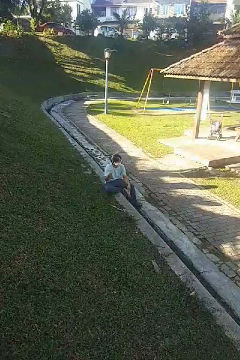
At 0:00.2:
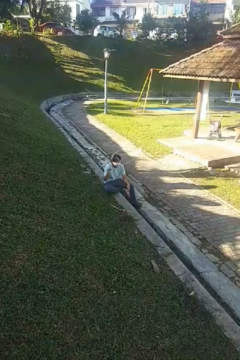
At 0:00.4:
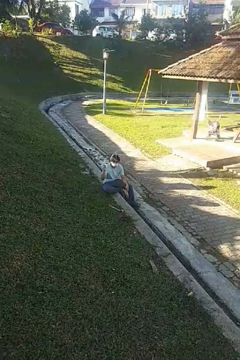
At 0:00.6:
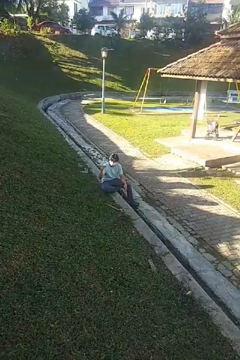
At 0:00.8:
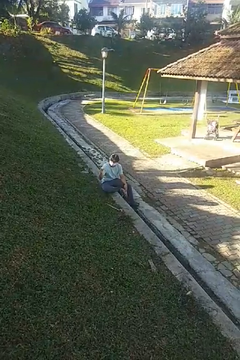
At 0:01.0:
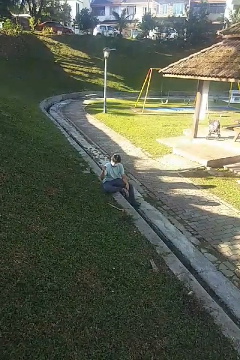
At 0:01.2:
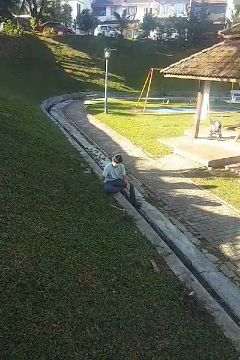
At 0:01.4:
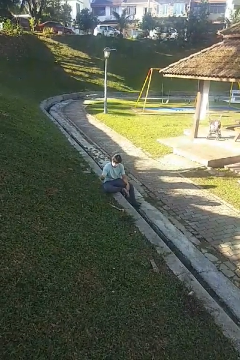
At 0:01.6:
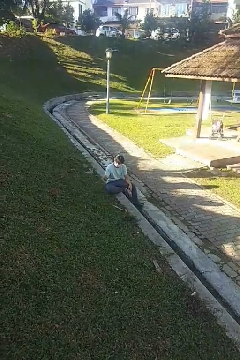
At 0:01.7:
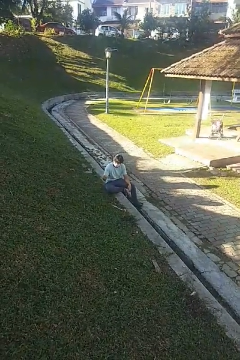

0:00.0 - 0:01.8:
person snaps fingers

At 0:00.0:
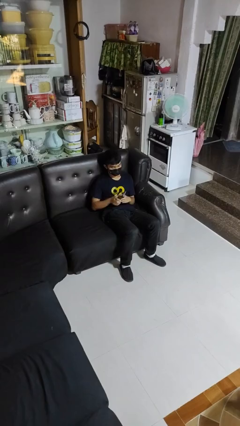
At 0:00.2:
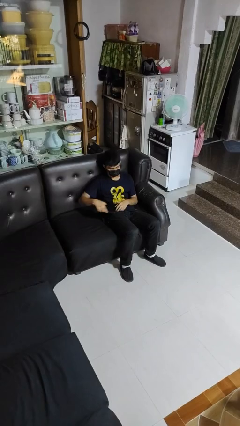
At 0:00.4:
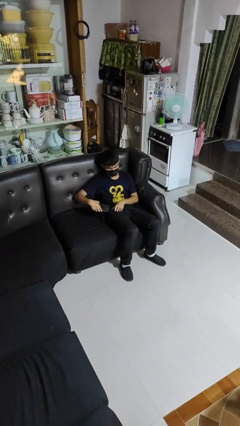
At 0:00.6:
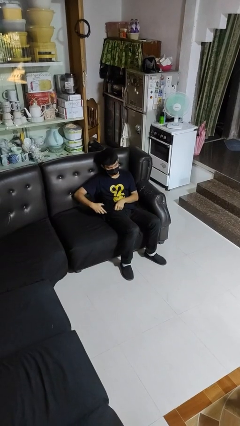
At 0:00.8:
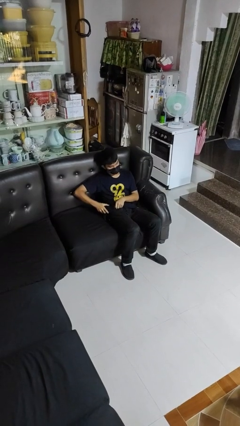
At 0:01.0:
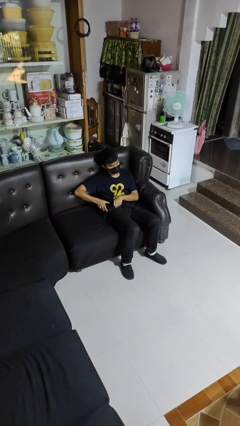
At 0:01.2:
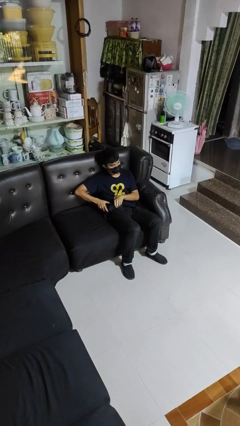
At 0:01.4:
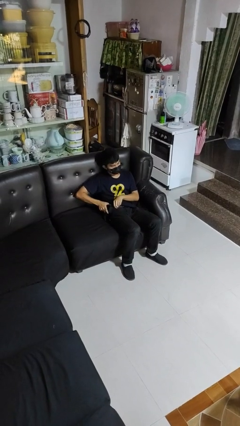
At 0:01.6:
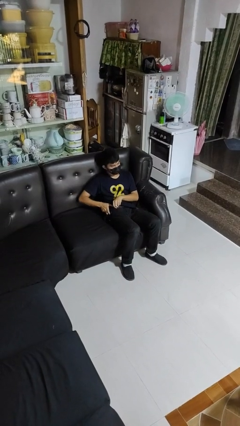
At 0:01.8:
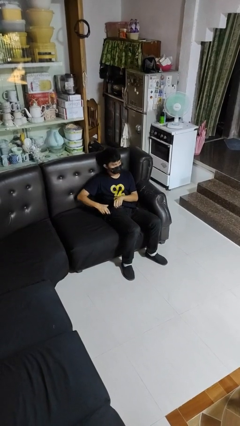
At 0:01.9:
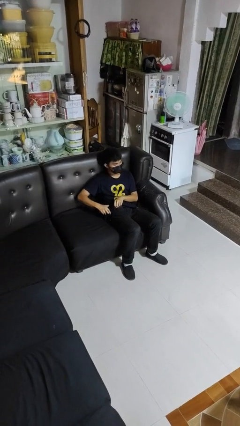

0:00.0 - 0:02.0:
person puts phone into pocket

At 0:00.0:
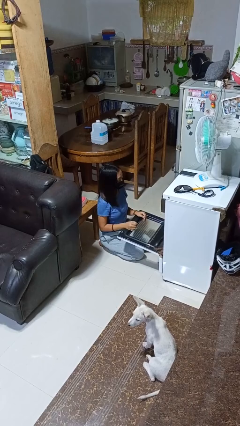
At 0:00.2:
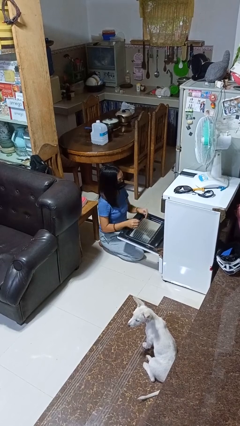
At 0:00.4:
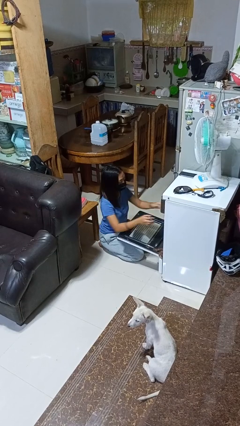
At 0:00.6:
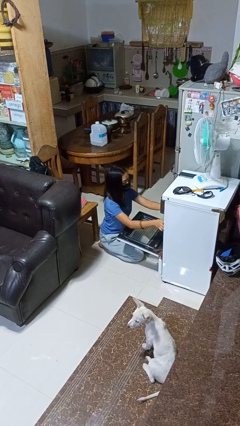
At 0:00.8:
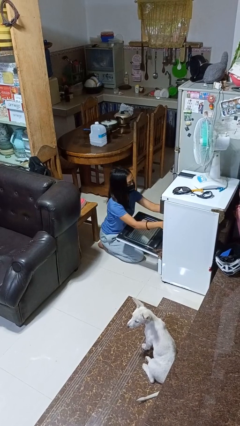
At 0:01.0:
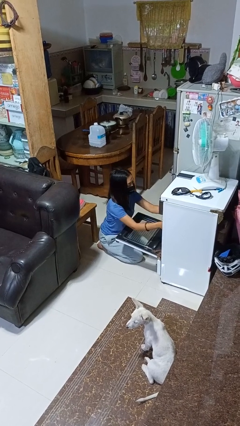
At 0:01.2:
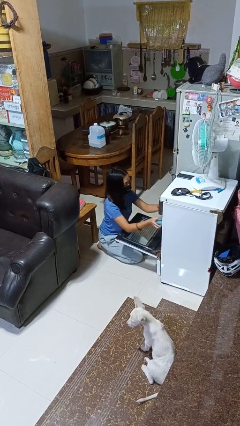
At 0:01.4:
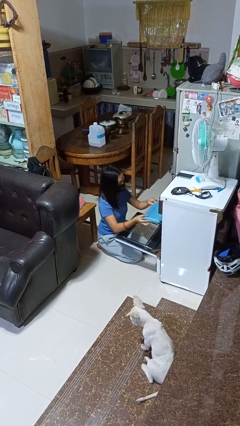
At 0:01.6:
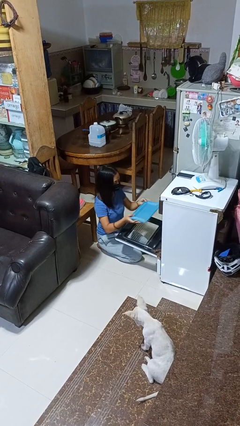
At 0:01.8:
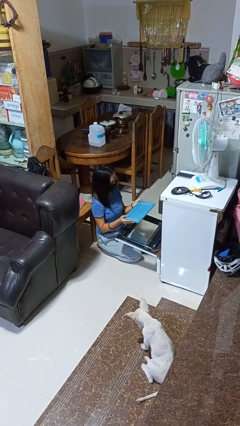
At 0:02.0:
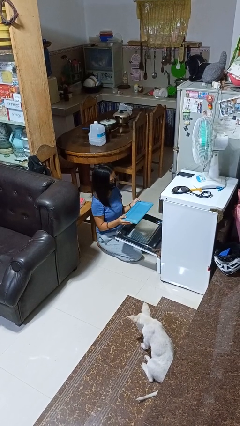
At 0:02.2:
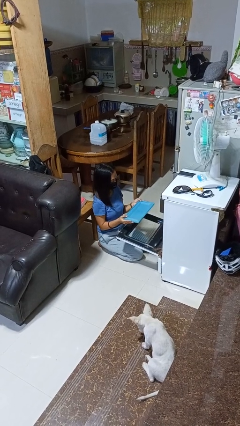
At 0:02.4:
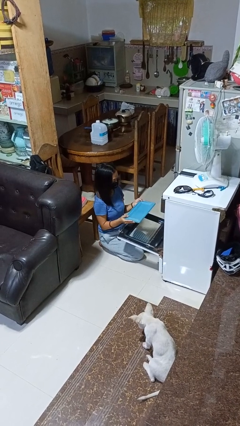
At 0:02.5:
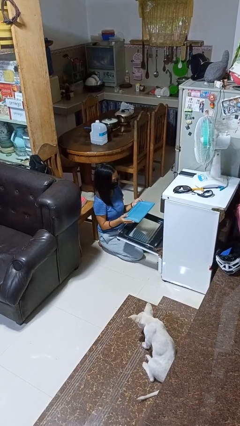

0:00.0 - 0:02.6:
person takes object from oven

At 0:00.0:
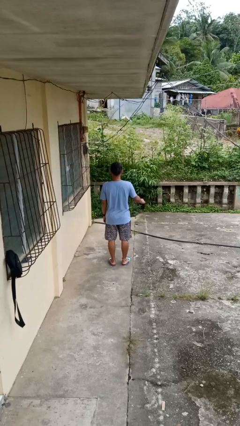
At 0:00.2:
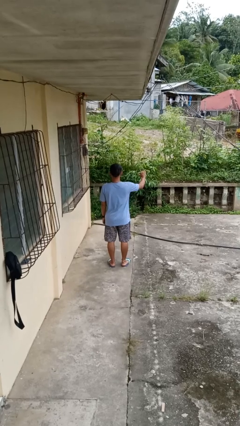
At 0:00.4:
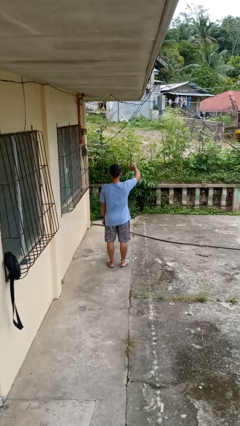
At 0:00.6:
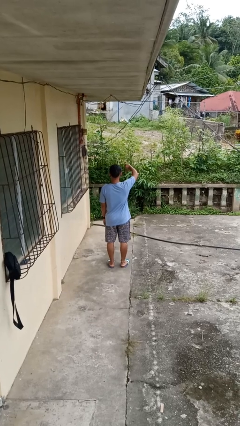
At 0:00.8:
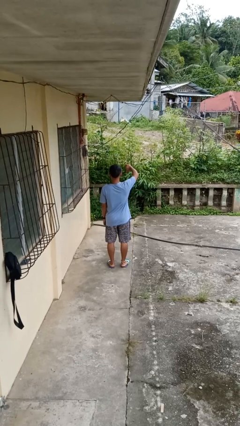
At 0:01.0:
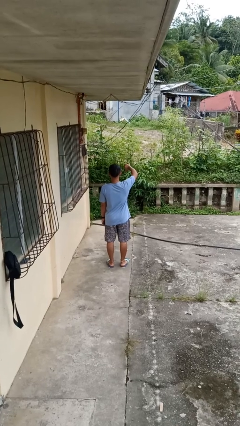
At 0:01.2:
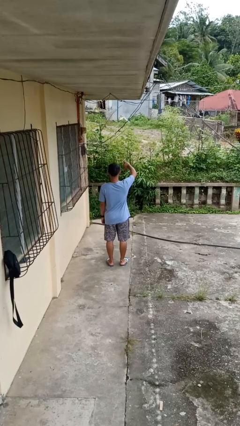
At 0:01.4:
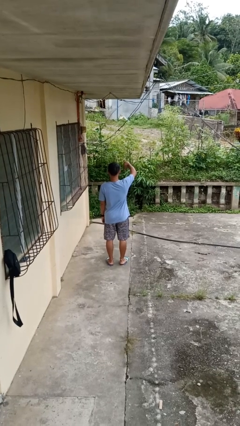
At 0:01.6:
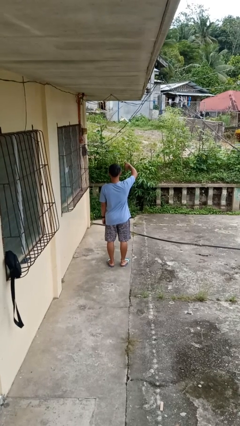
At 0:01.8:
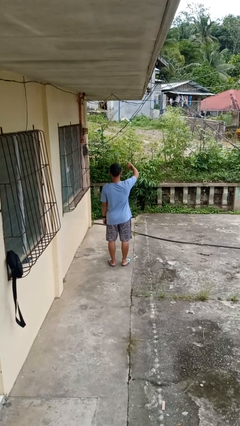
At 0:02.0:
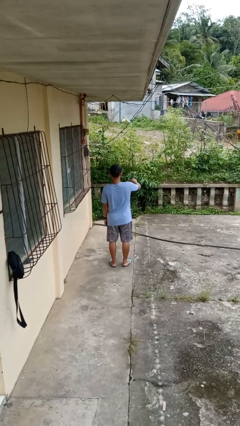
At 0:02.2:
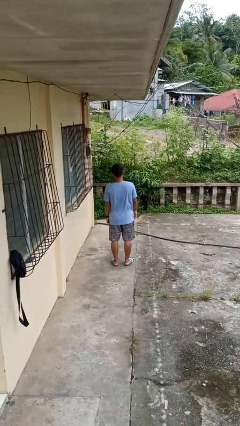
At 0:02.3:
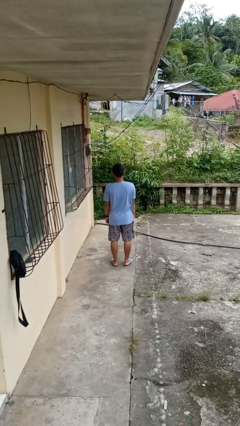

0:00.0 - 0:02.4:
person gestures thumbs down

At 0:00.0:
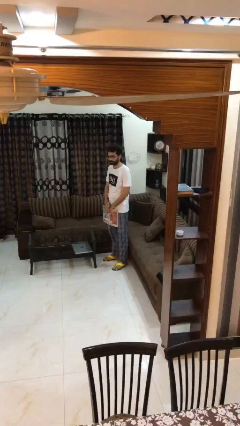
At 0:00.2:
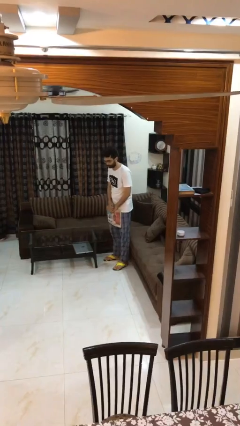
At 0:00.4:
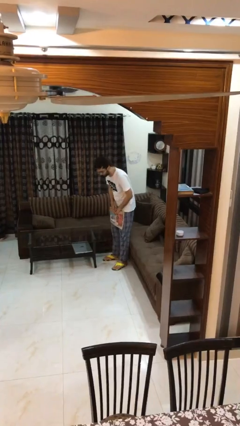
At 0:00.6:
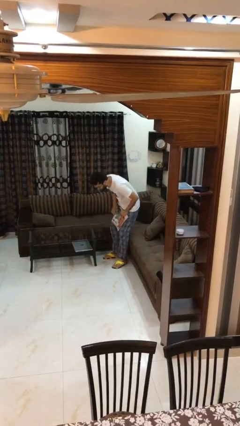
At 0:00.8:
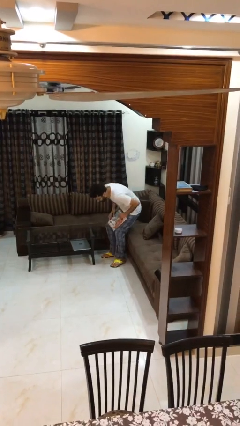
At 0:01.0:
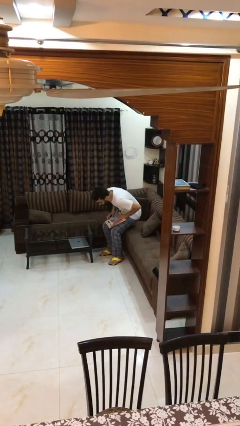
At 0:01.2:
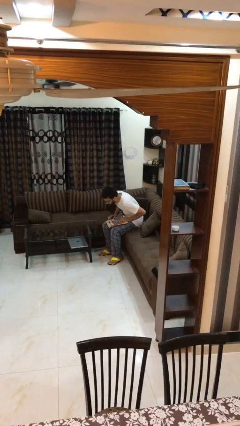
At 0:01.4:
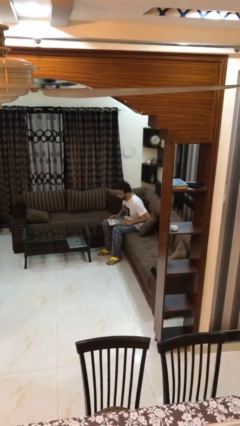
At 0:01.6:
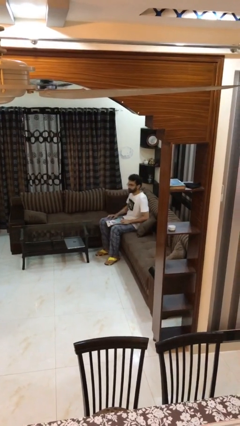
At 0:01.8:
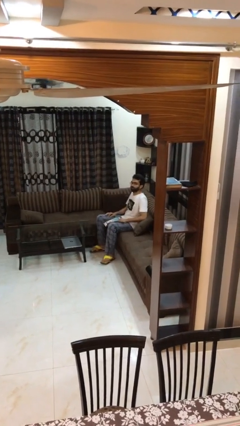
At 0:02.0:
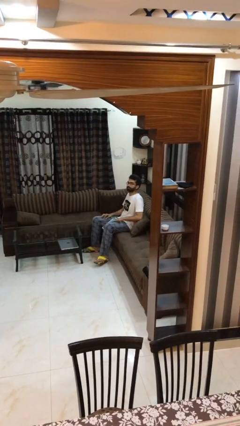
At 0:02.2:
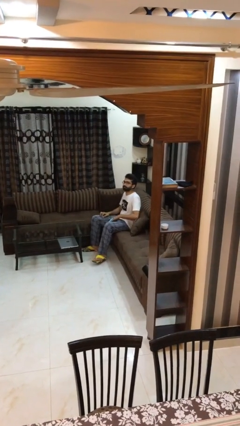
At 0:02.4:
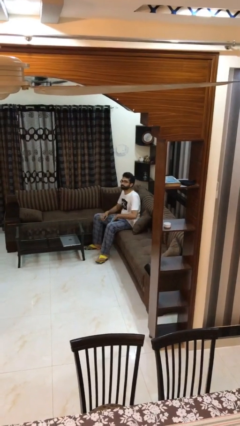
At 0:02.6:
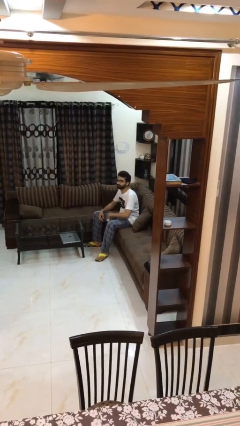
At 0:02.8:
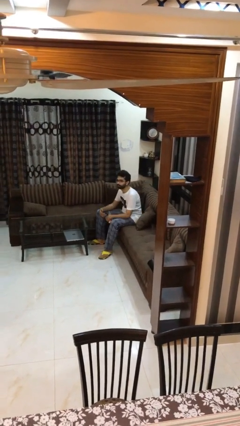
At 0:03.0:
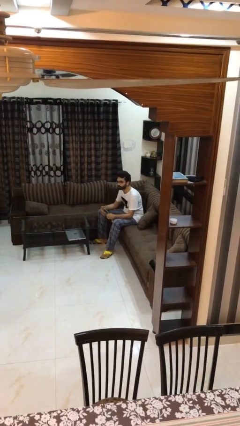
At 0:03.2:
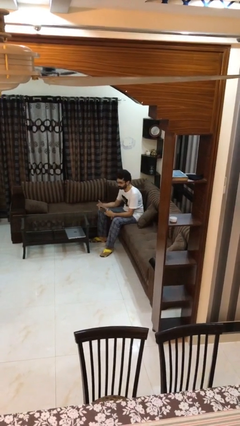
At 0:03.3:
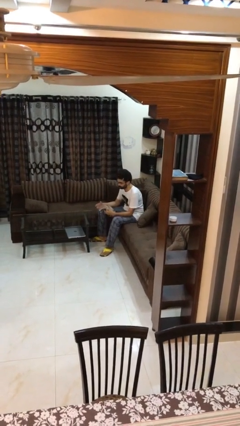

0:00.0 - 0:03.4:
person sits down

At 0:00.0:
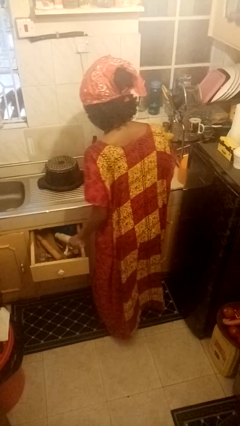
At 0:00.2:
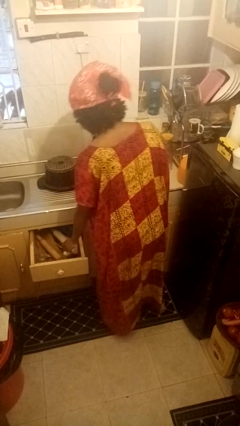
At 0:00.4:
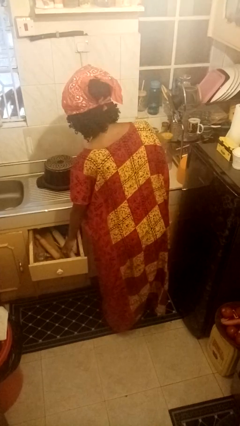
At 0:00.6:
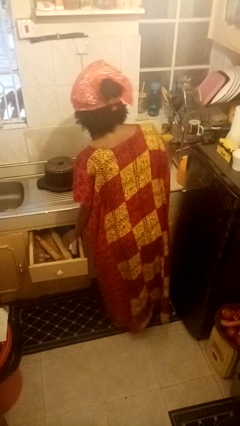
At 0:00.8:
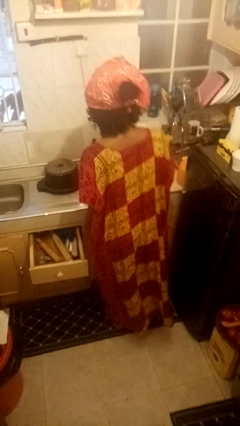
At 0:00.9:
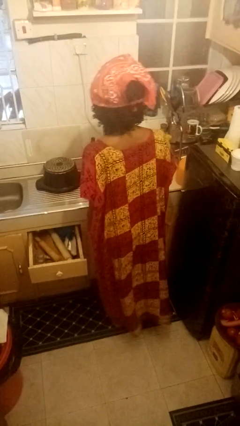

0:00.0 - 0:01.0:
person puts object into kitchen drawer

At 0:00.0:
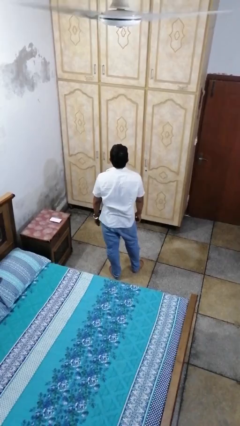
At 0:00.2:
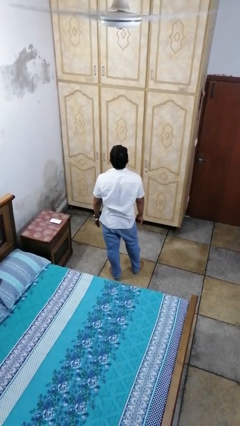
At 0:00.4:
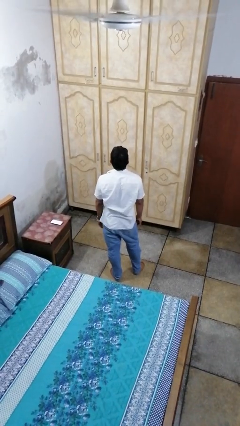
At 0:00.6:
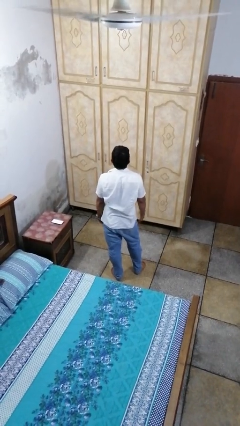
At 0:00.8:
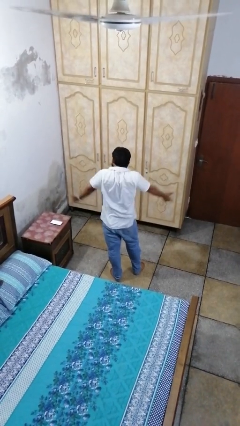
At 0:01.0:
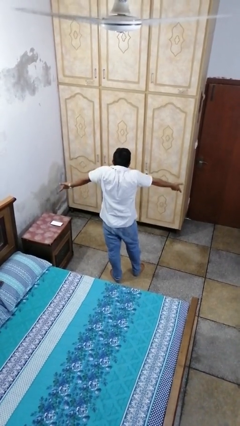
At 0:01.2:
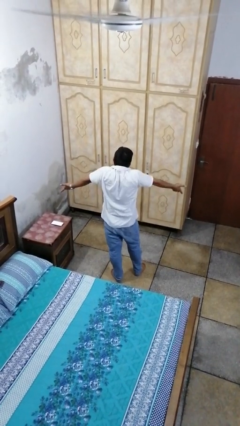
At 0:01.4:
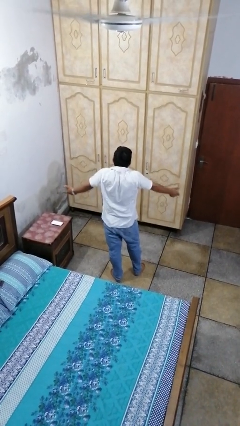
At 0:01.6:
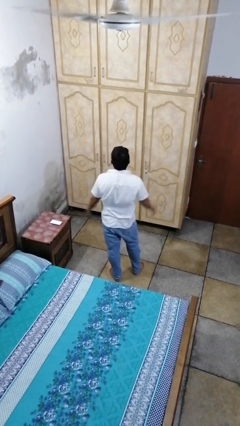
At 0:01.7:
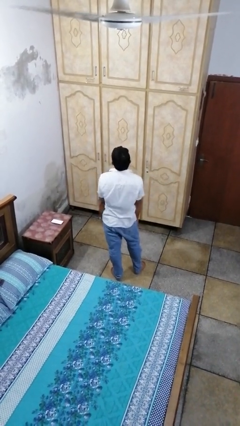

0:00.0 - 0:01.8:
person shrugs

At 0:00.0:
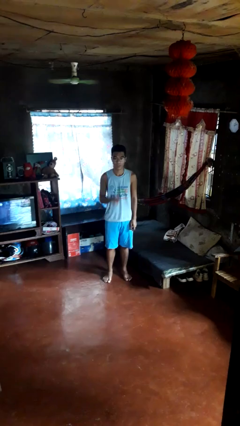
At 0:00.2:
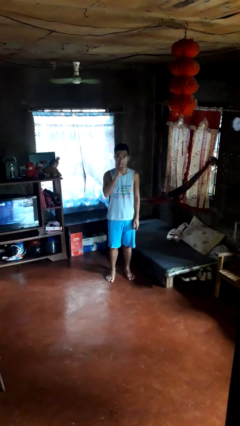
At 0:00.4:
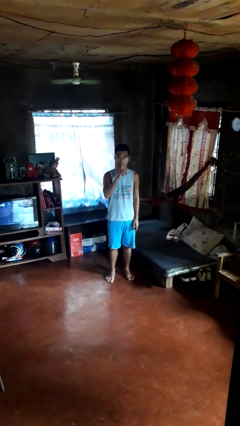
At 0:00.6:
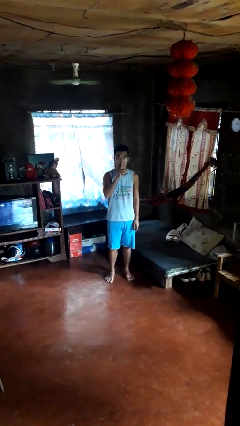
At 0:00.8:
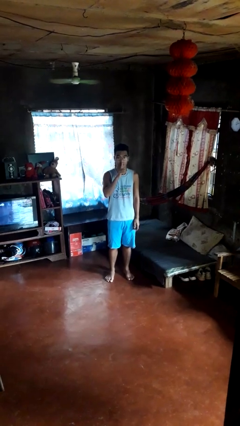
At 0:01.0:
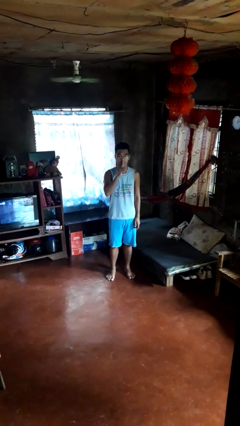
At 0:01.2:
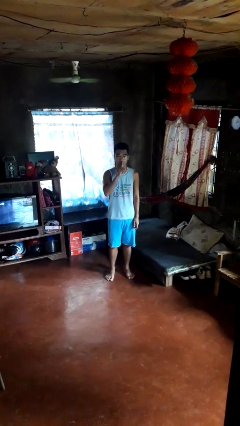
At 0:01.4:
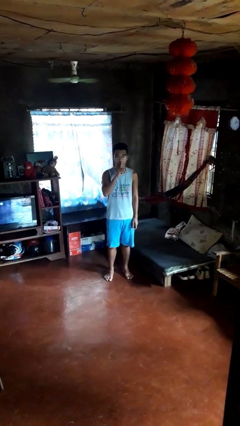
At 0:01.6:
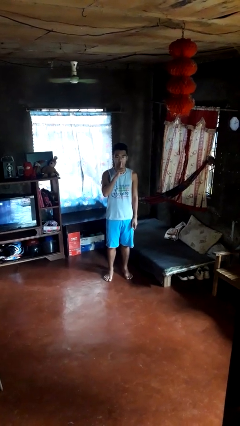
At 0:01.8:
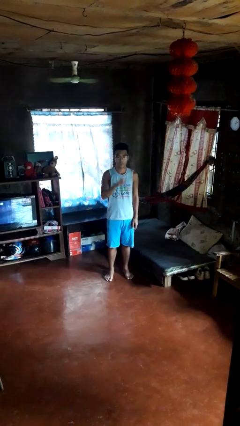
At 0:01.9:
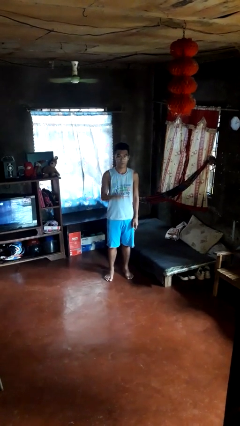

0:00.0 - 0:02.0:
person gestures be quiet
